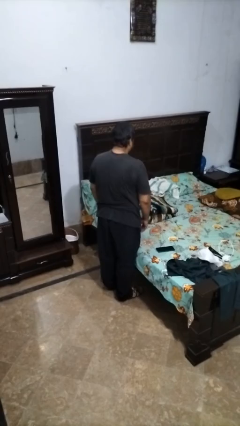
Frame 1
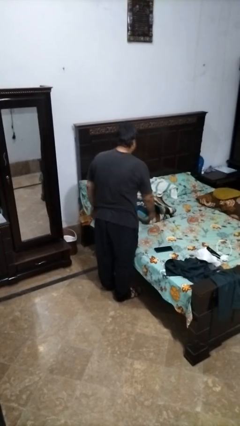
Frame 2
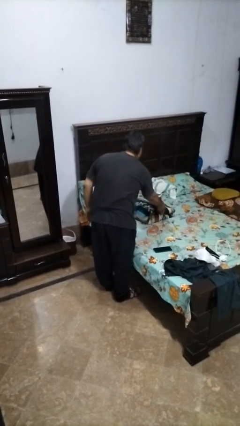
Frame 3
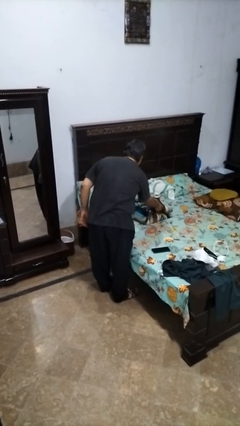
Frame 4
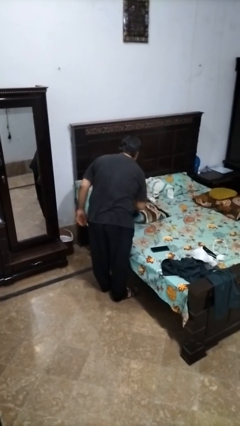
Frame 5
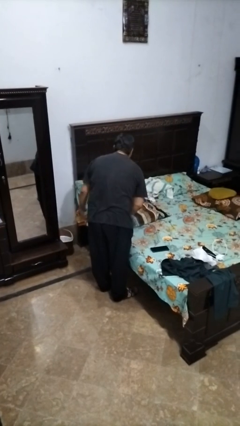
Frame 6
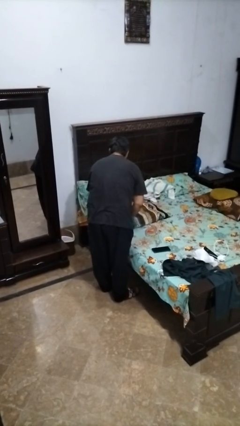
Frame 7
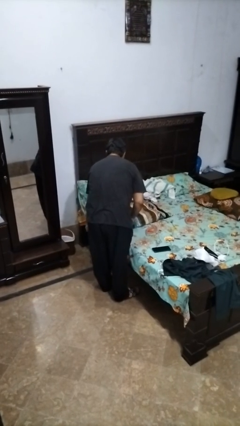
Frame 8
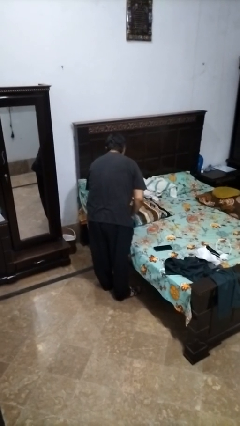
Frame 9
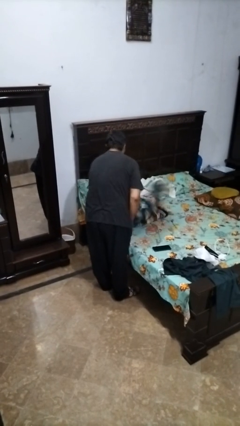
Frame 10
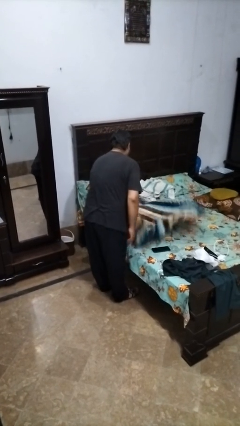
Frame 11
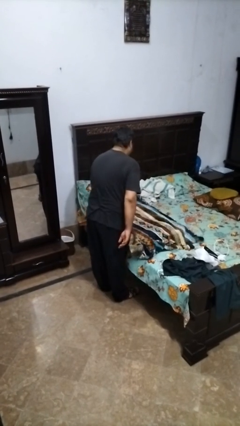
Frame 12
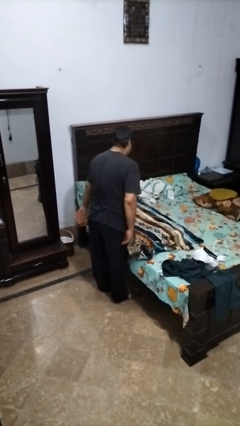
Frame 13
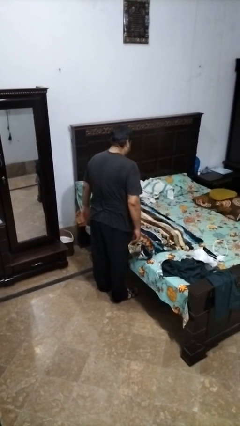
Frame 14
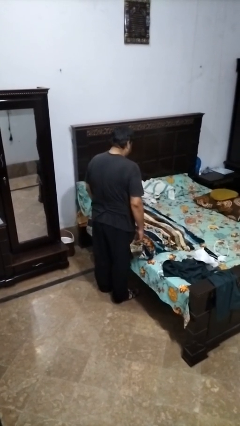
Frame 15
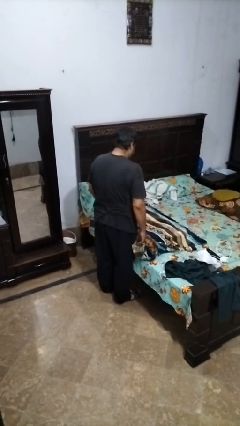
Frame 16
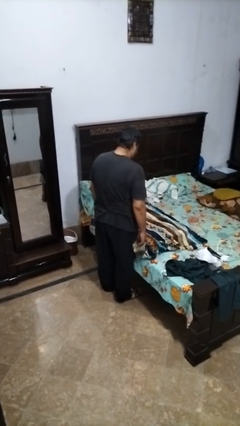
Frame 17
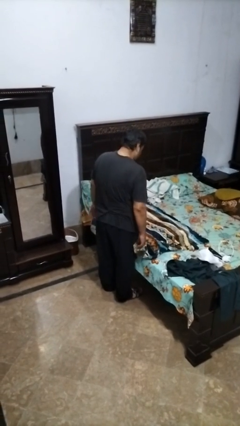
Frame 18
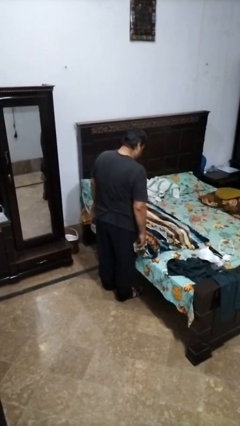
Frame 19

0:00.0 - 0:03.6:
person unfolds blanket

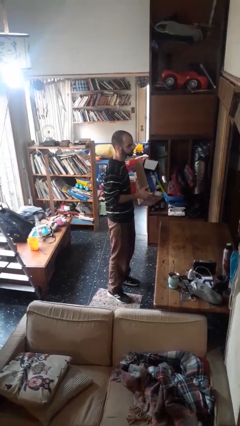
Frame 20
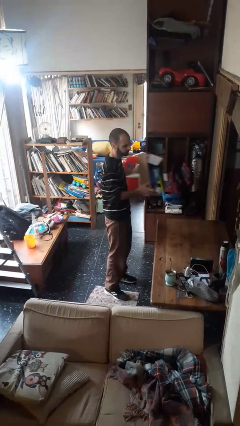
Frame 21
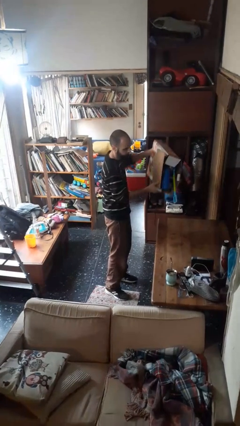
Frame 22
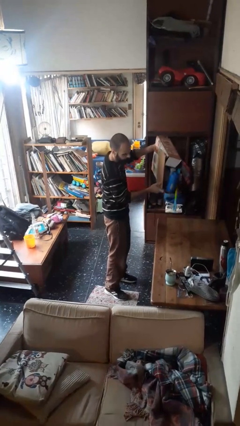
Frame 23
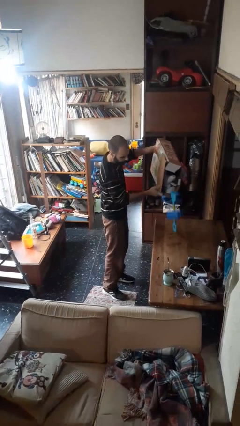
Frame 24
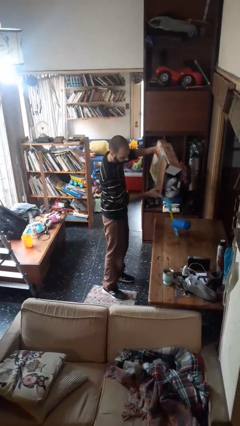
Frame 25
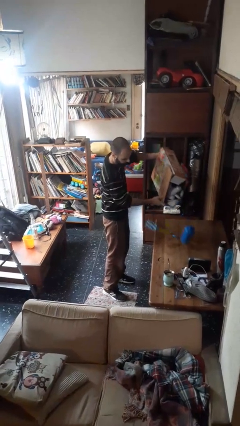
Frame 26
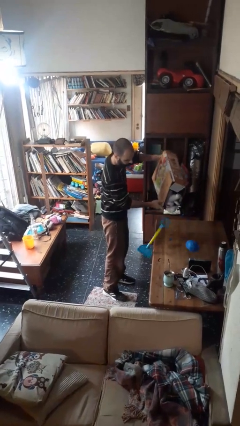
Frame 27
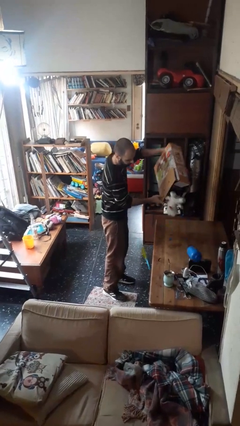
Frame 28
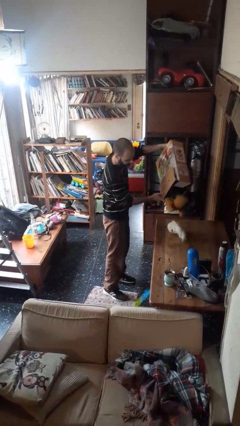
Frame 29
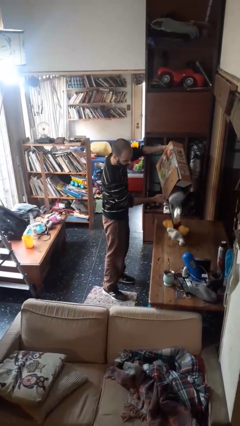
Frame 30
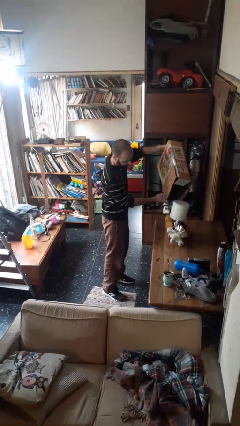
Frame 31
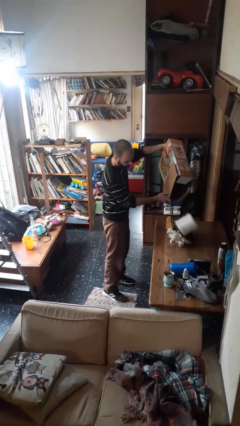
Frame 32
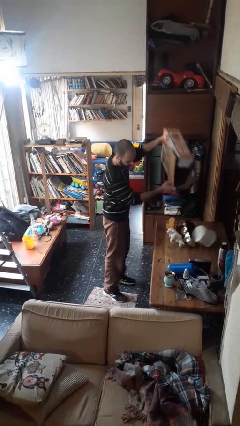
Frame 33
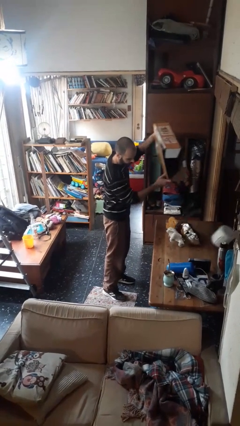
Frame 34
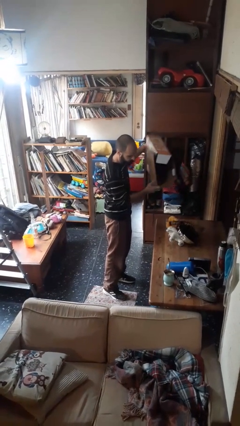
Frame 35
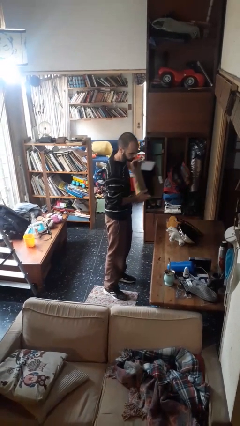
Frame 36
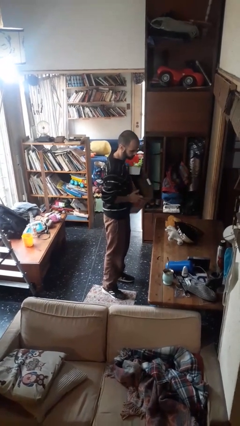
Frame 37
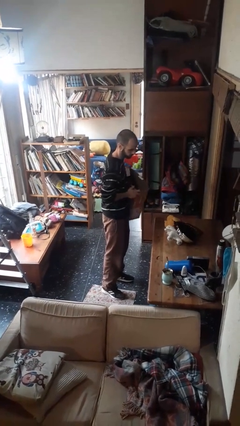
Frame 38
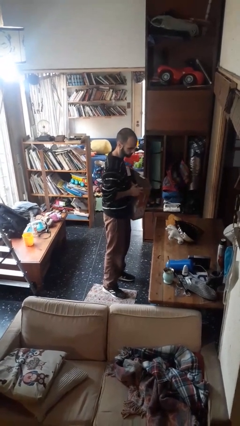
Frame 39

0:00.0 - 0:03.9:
person unloads box onto table

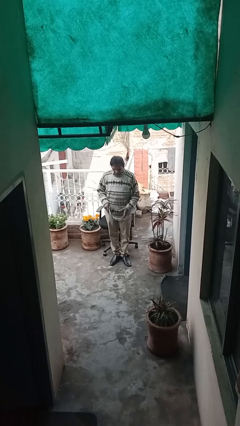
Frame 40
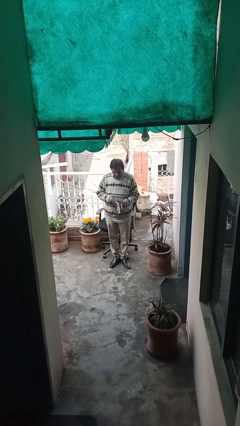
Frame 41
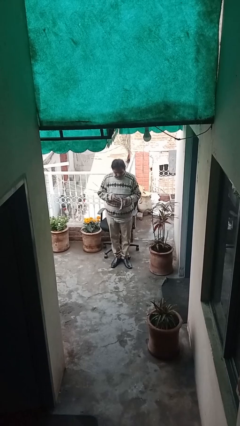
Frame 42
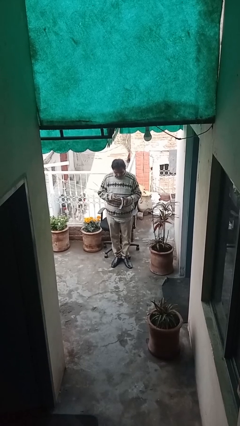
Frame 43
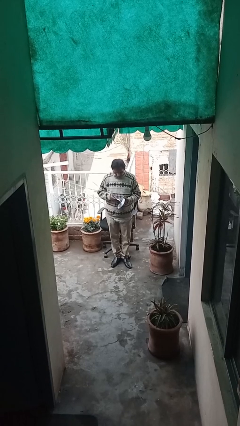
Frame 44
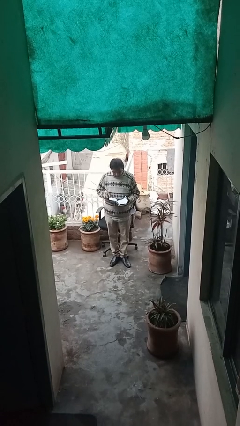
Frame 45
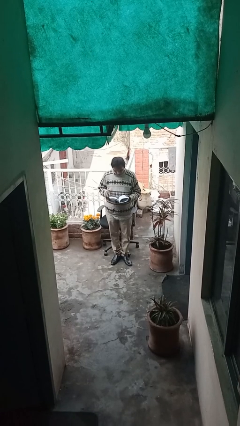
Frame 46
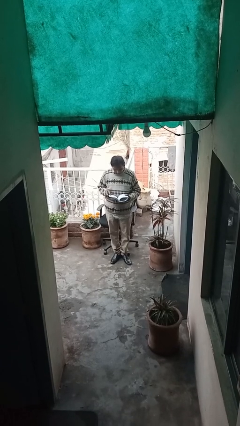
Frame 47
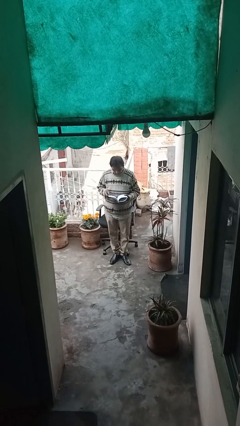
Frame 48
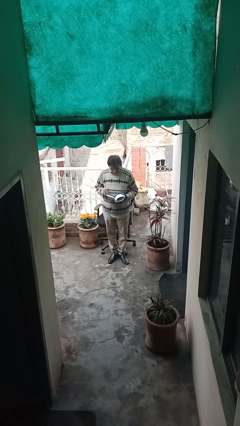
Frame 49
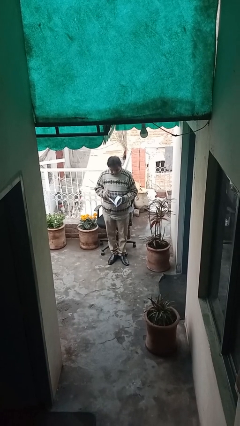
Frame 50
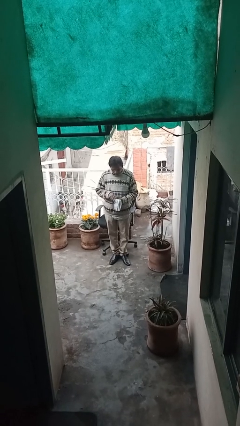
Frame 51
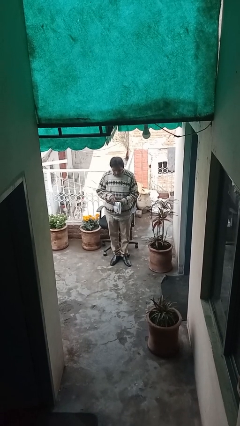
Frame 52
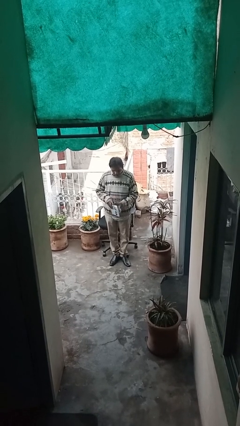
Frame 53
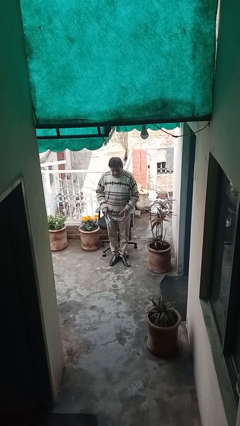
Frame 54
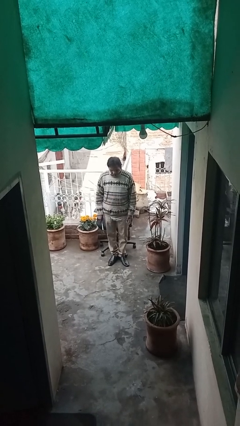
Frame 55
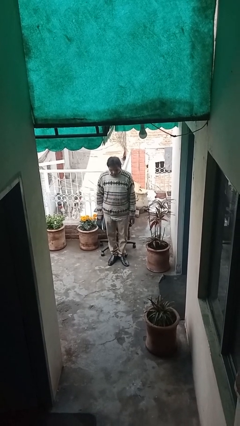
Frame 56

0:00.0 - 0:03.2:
person reads document

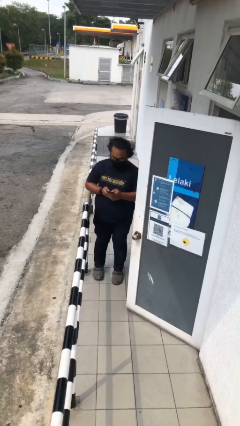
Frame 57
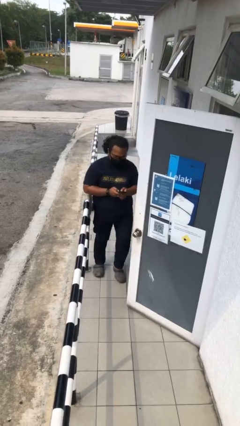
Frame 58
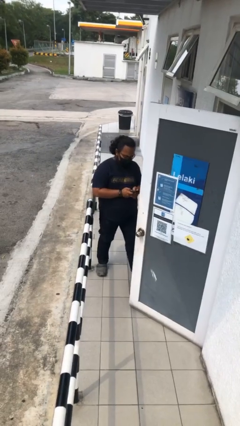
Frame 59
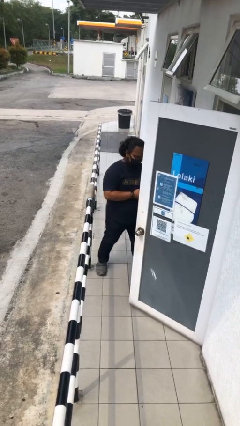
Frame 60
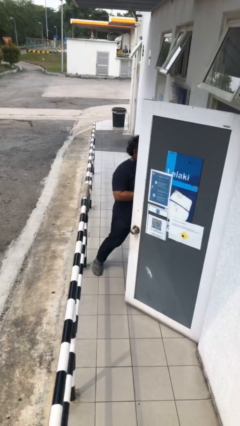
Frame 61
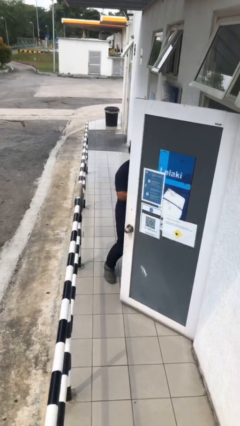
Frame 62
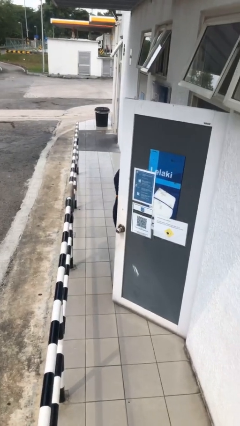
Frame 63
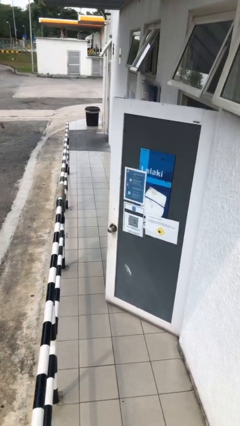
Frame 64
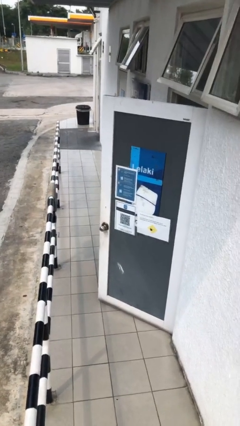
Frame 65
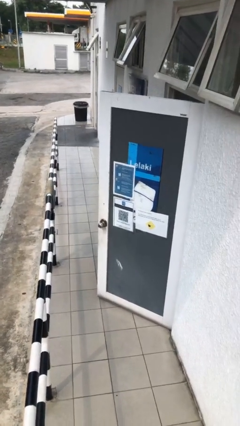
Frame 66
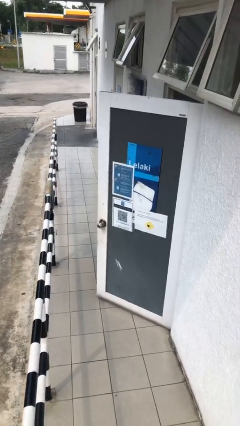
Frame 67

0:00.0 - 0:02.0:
person exits scene through structure

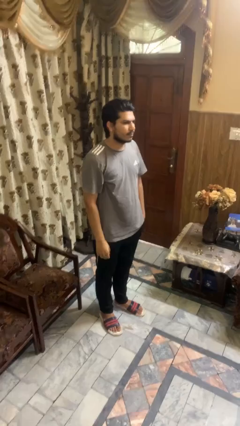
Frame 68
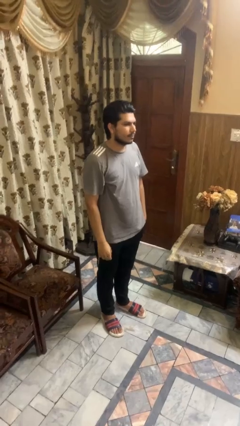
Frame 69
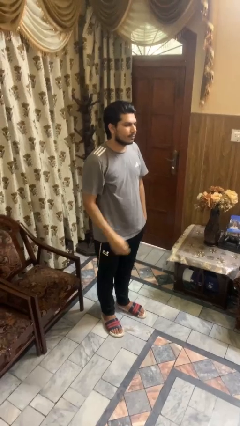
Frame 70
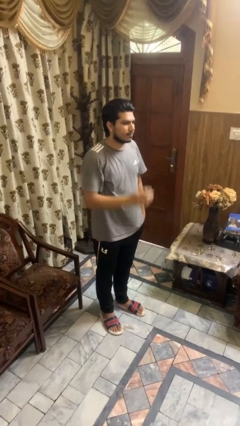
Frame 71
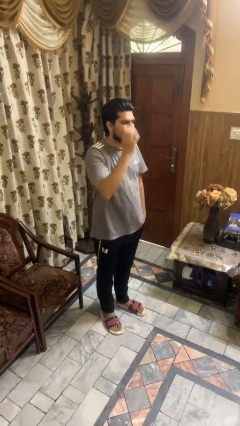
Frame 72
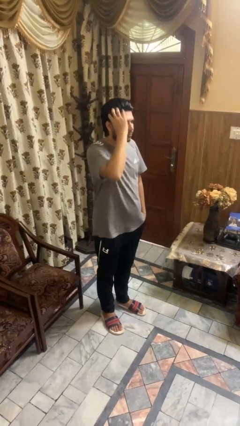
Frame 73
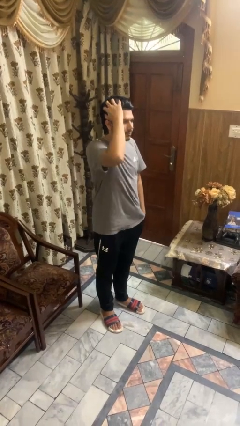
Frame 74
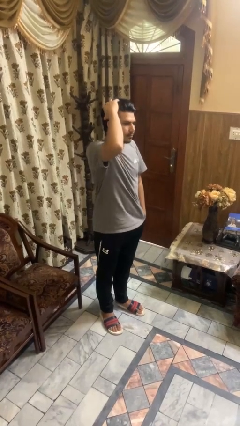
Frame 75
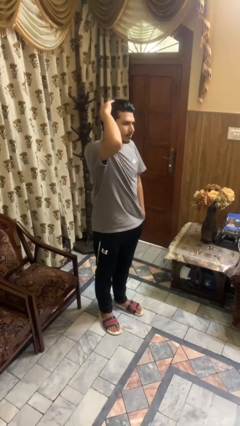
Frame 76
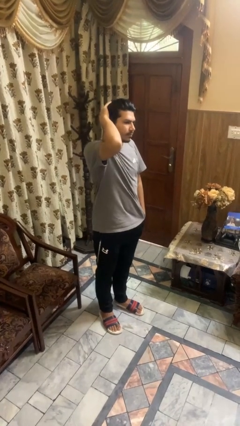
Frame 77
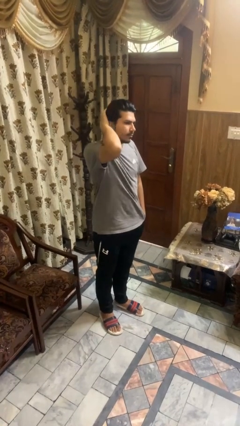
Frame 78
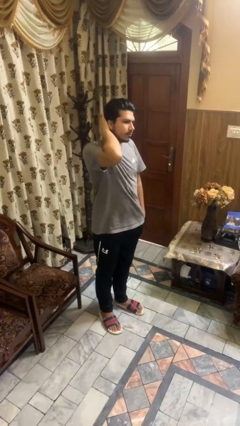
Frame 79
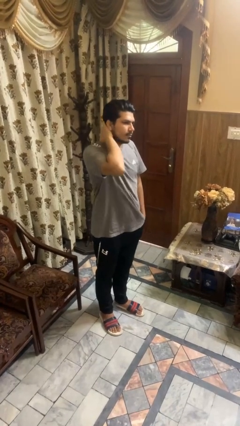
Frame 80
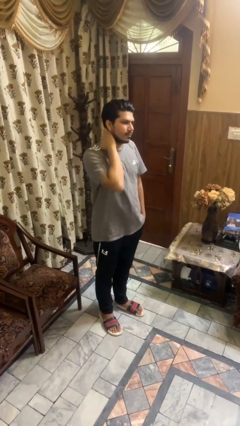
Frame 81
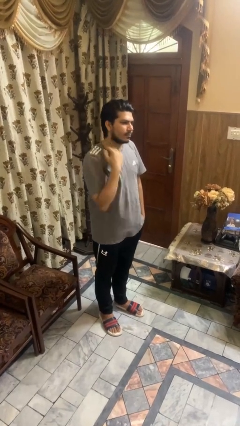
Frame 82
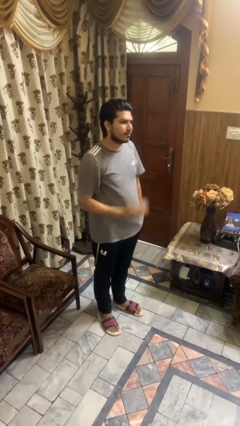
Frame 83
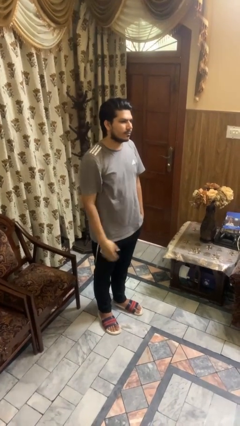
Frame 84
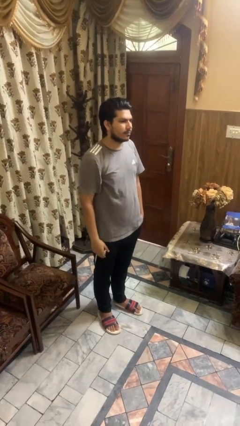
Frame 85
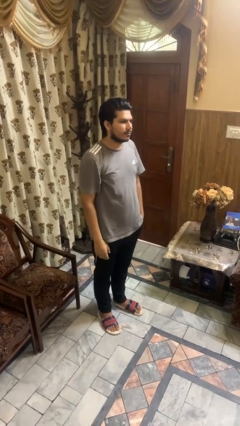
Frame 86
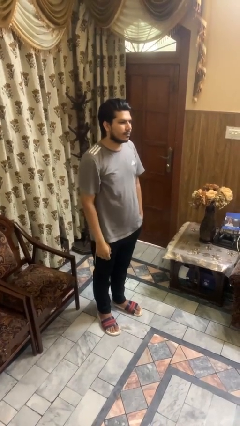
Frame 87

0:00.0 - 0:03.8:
person strokes hair

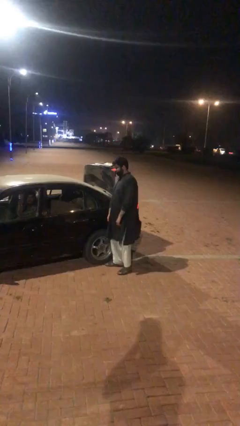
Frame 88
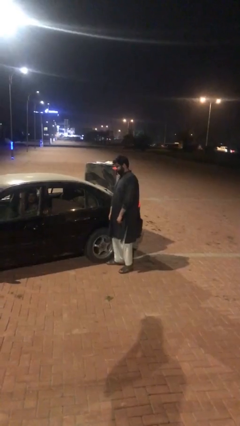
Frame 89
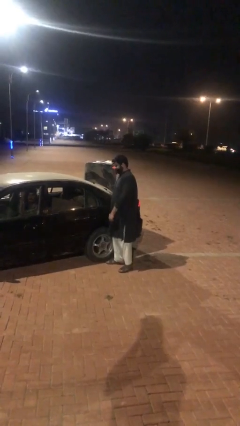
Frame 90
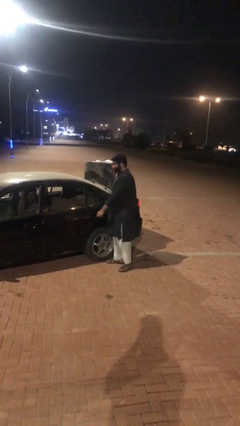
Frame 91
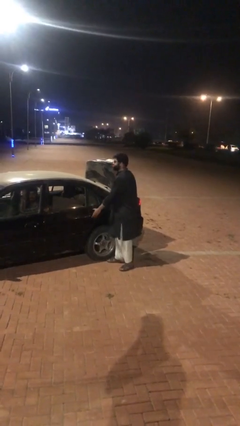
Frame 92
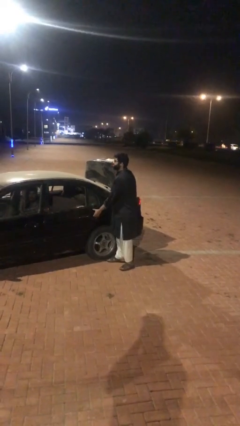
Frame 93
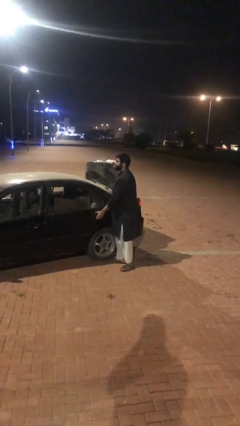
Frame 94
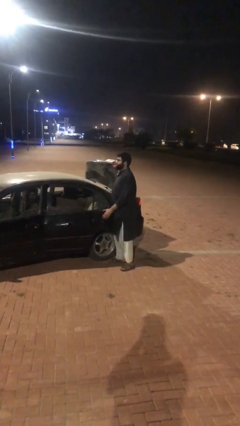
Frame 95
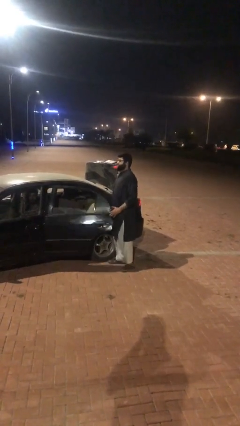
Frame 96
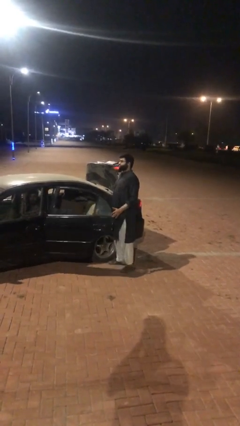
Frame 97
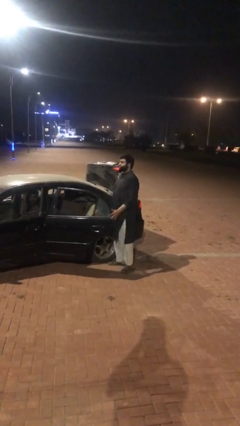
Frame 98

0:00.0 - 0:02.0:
person opens car door
